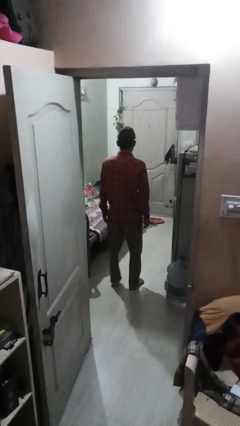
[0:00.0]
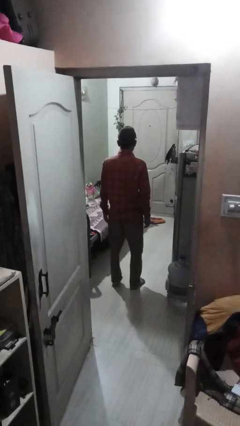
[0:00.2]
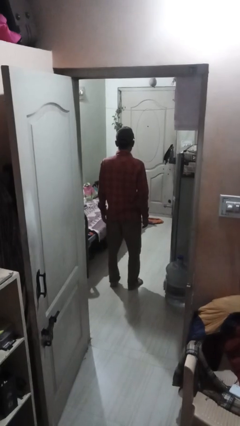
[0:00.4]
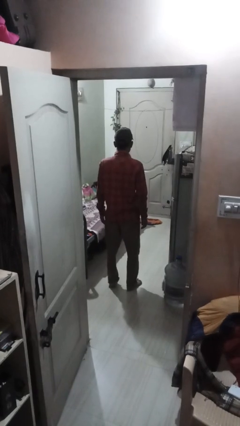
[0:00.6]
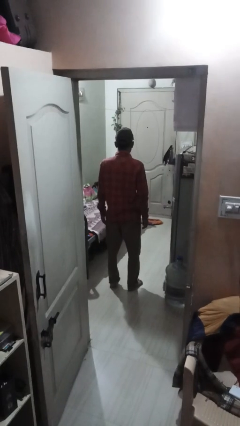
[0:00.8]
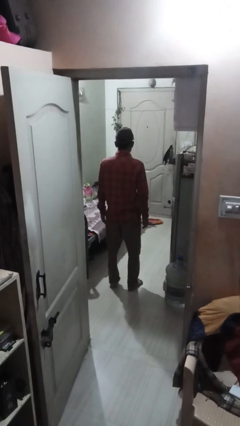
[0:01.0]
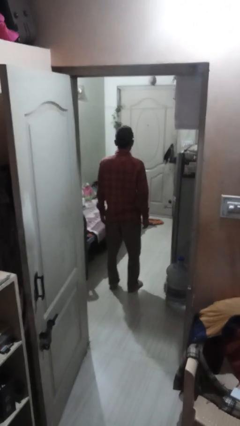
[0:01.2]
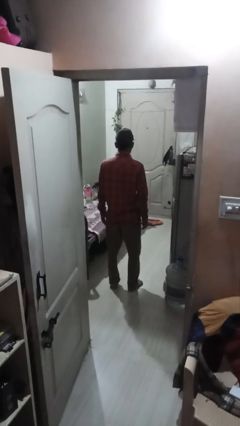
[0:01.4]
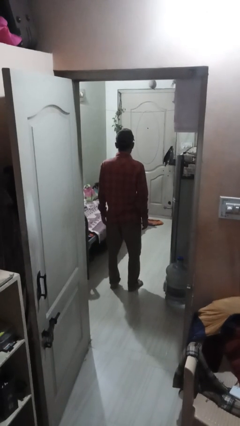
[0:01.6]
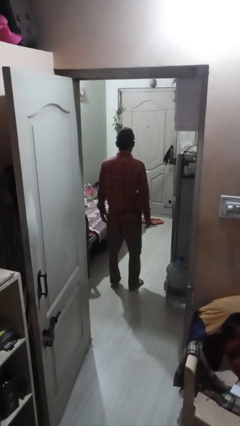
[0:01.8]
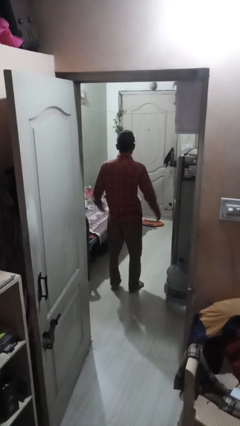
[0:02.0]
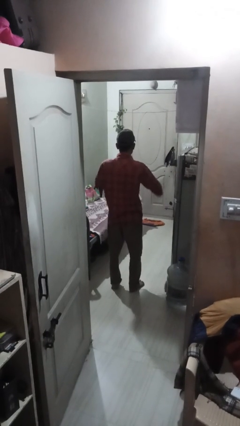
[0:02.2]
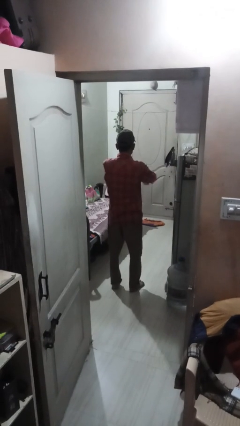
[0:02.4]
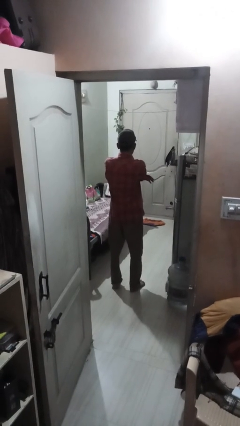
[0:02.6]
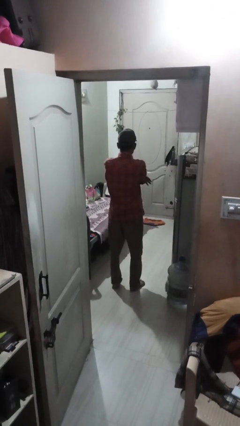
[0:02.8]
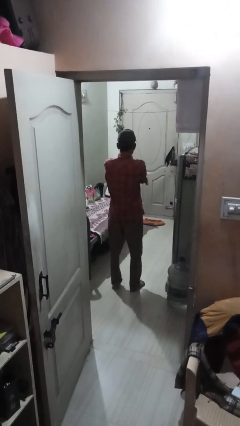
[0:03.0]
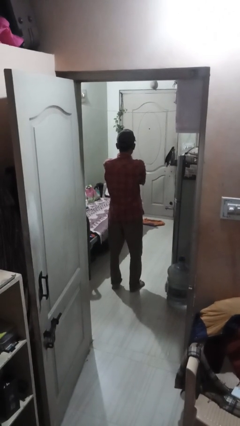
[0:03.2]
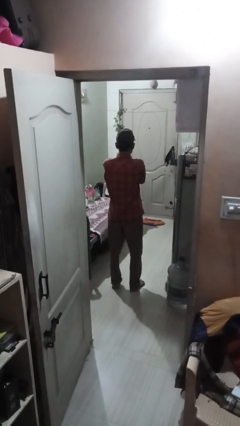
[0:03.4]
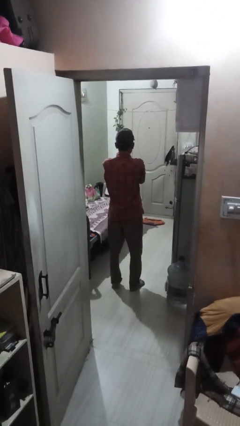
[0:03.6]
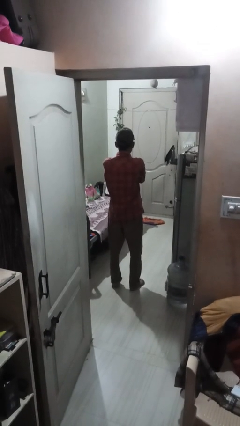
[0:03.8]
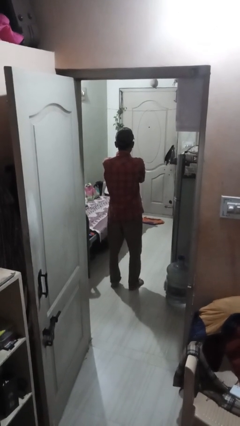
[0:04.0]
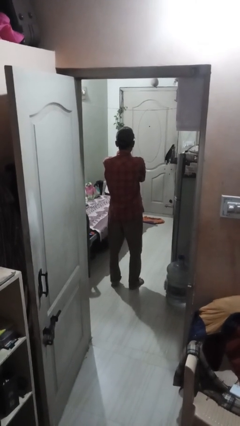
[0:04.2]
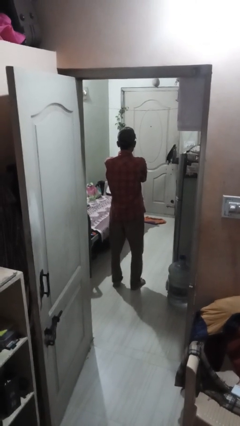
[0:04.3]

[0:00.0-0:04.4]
person crosses arms

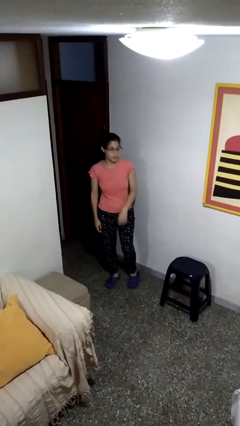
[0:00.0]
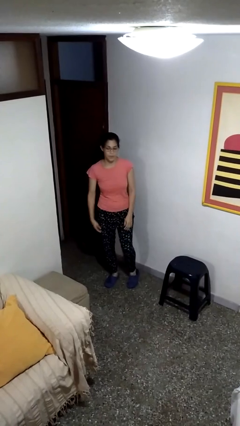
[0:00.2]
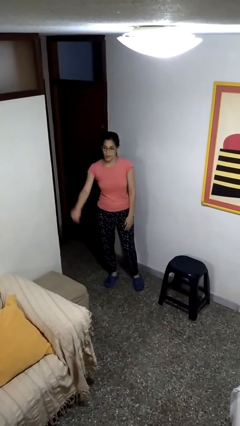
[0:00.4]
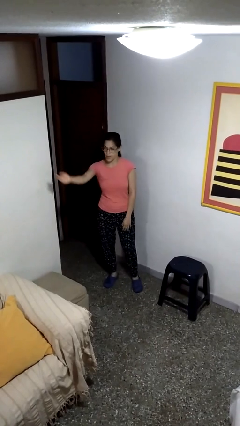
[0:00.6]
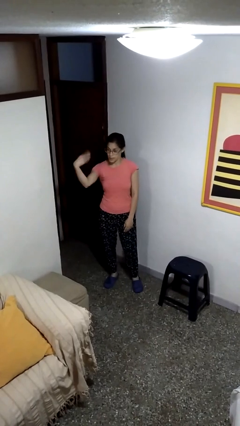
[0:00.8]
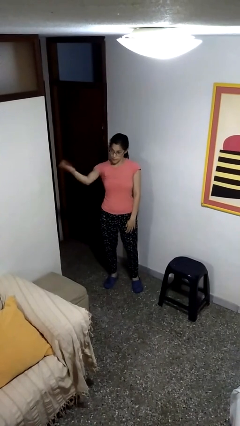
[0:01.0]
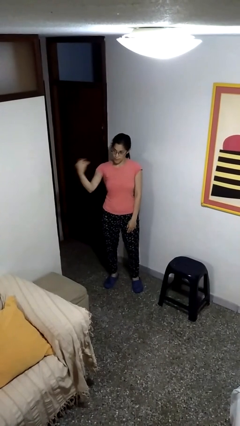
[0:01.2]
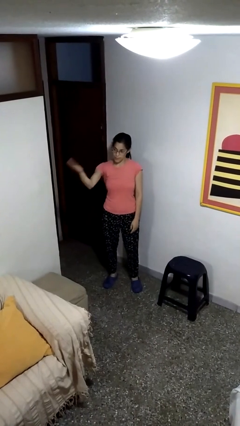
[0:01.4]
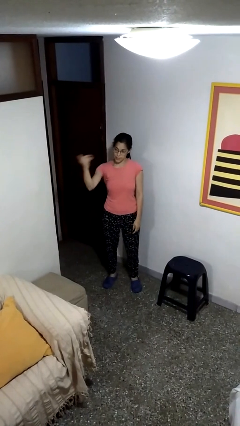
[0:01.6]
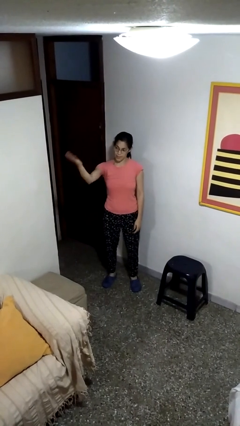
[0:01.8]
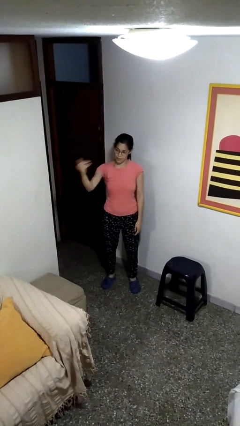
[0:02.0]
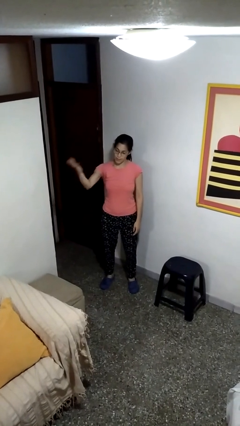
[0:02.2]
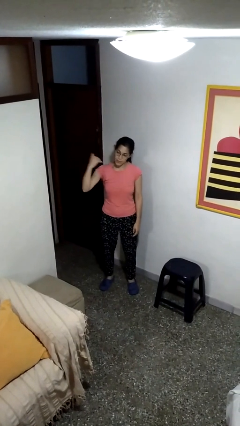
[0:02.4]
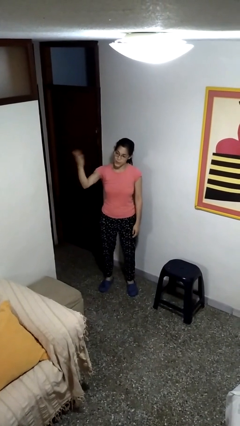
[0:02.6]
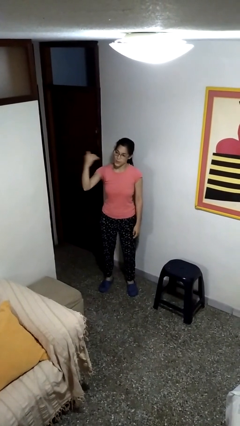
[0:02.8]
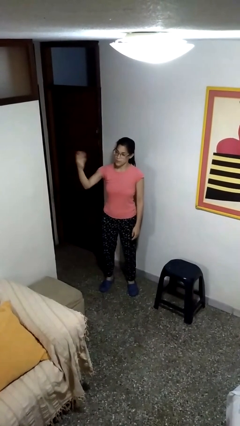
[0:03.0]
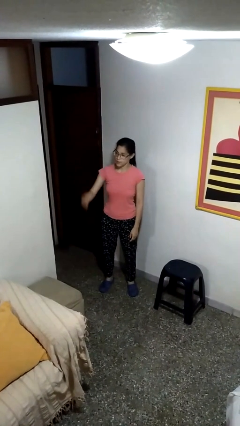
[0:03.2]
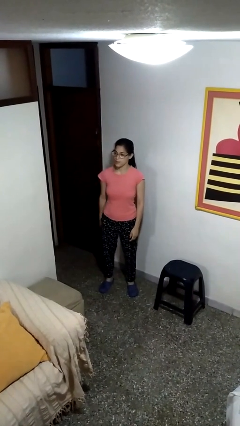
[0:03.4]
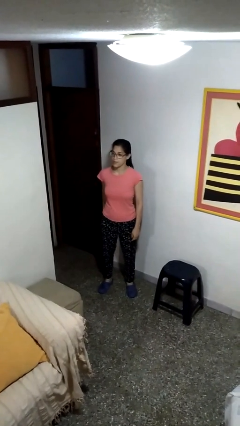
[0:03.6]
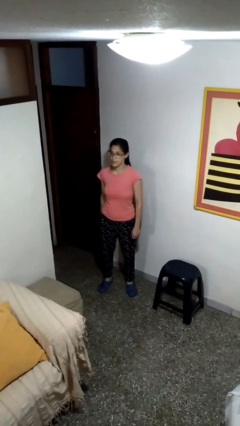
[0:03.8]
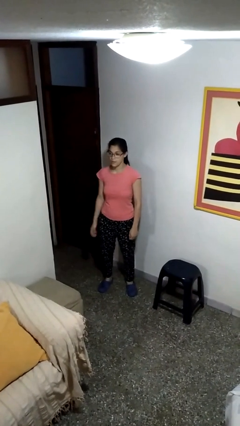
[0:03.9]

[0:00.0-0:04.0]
person gestures come here

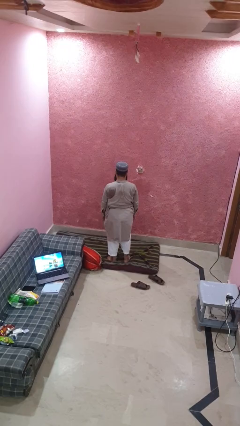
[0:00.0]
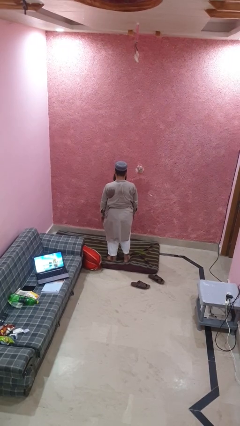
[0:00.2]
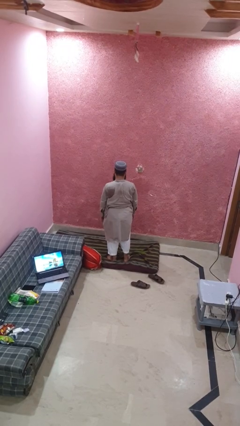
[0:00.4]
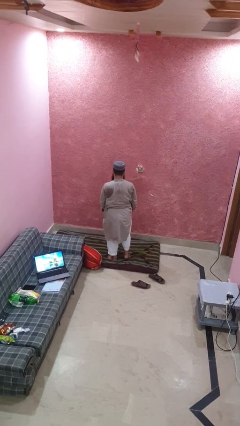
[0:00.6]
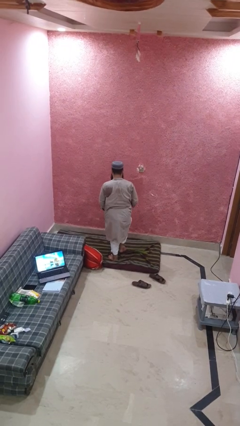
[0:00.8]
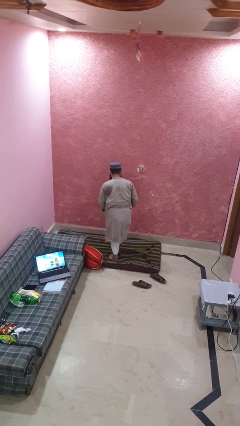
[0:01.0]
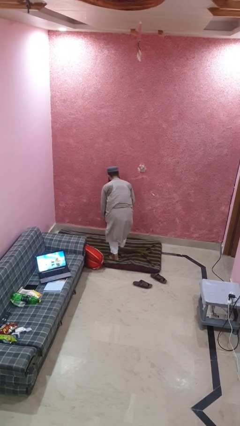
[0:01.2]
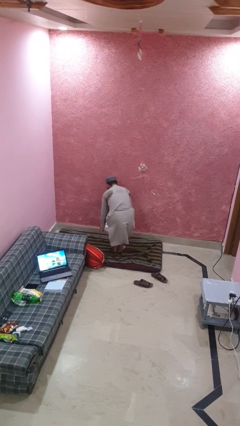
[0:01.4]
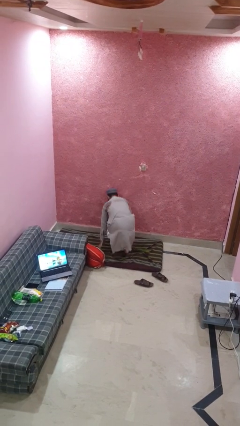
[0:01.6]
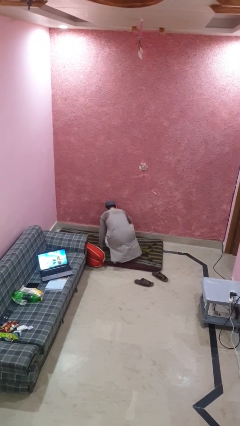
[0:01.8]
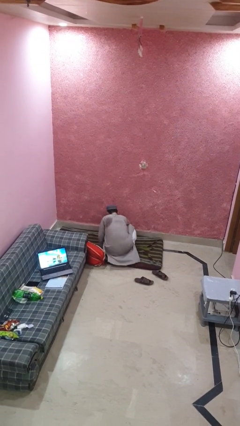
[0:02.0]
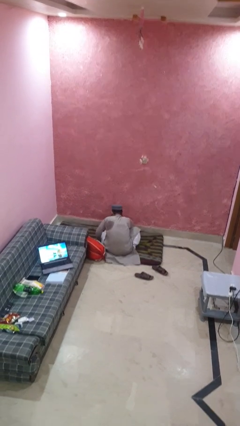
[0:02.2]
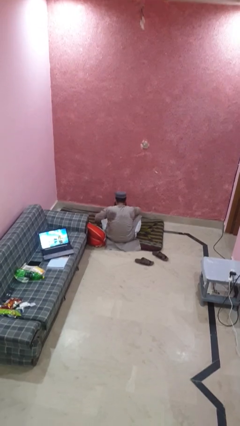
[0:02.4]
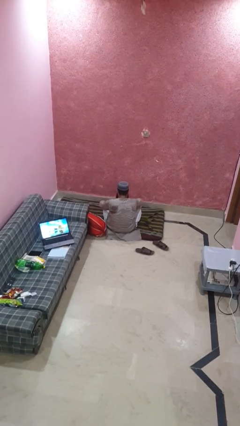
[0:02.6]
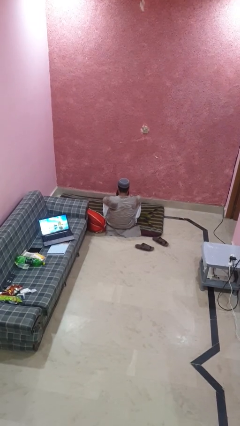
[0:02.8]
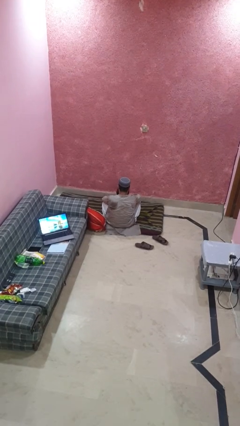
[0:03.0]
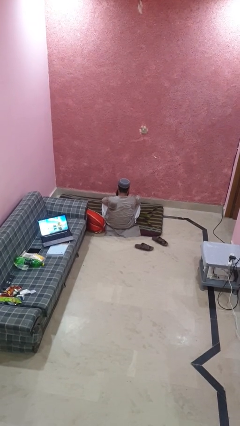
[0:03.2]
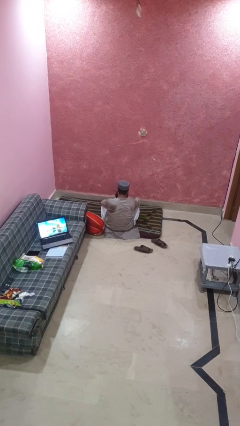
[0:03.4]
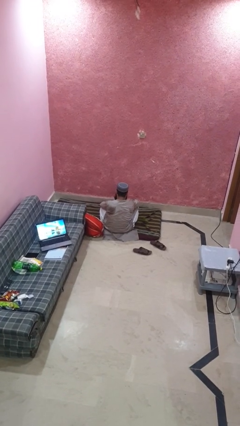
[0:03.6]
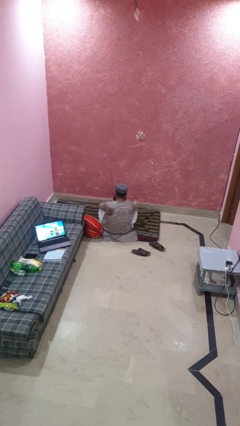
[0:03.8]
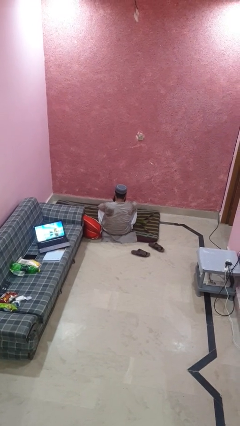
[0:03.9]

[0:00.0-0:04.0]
person sits crisscross

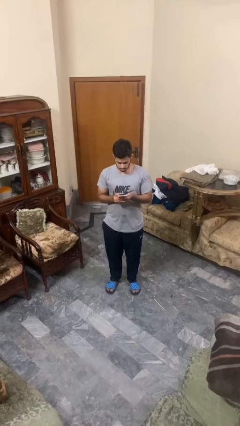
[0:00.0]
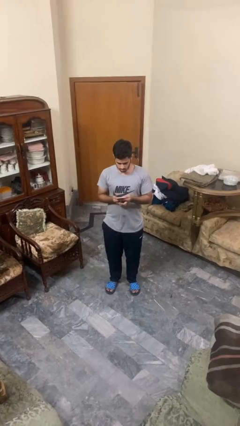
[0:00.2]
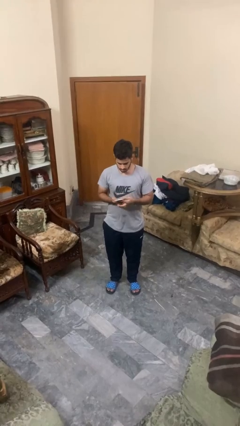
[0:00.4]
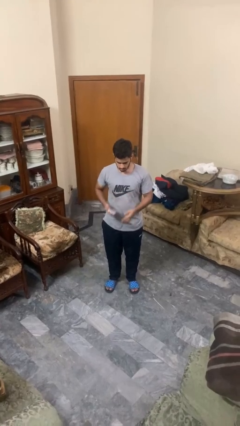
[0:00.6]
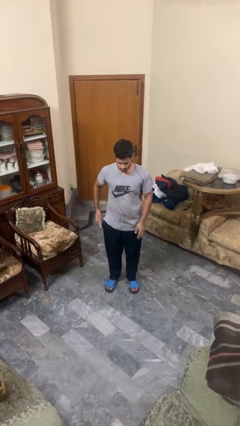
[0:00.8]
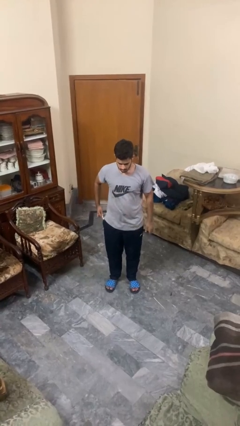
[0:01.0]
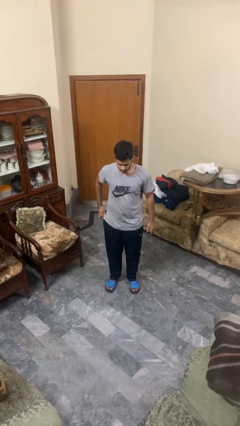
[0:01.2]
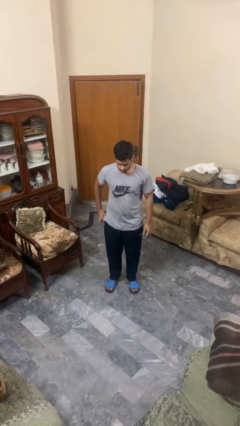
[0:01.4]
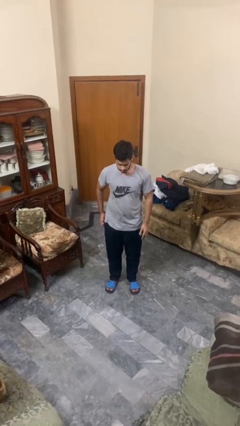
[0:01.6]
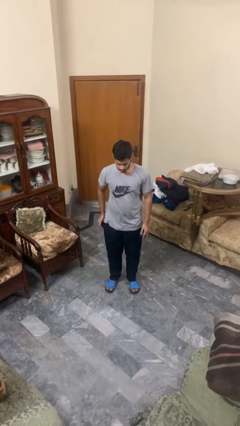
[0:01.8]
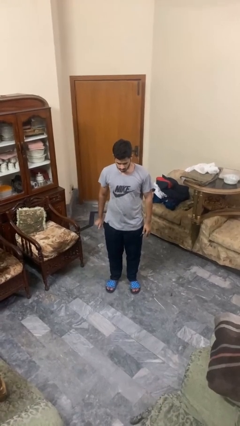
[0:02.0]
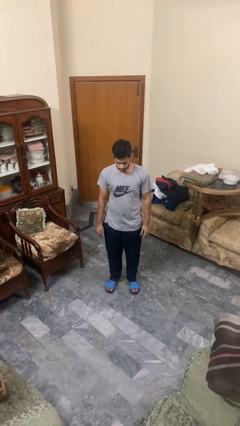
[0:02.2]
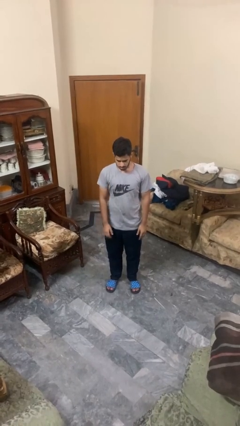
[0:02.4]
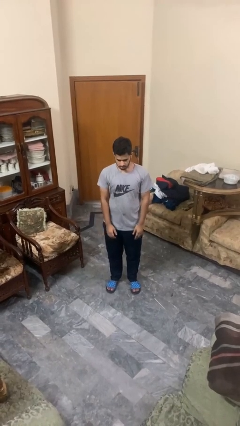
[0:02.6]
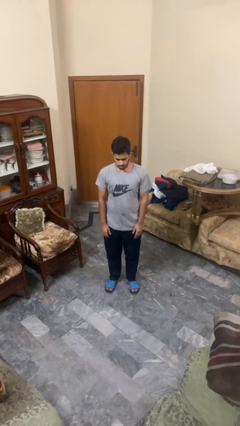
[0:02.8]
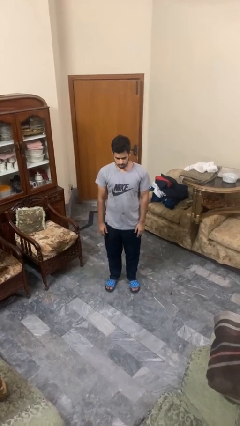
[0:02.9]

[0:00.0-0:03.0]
person puts phone into pocket

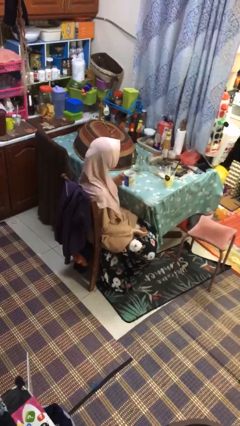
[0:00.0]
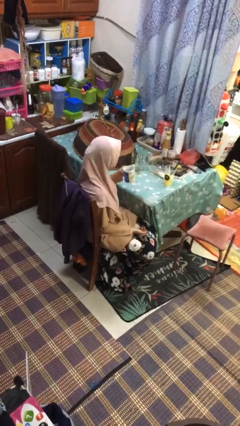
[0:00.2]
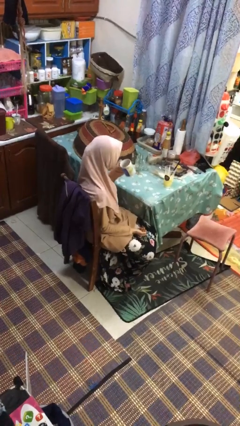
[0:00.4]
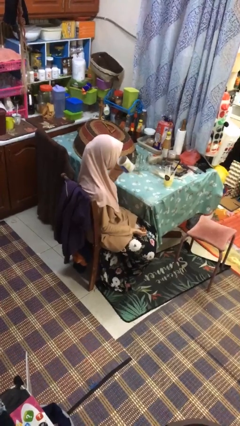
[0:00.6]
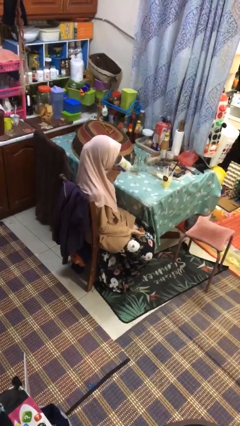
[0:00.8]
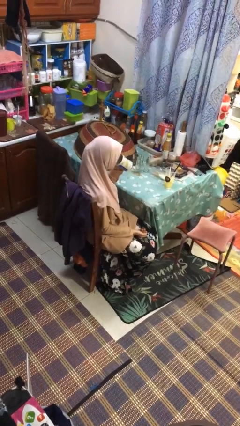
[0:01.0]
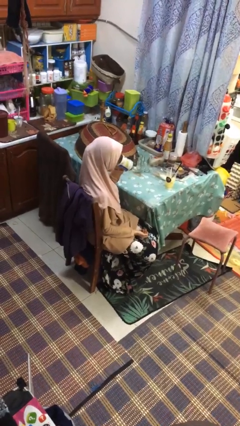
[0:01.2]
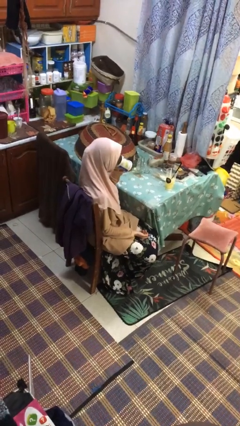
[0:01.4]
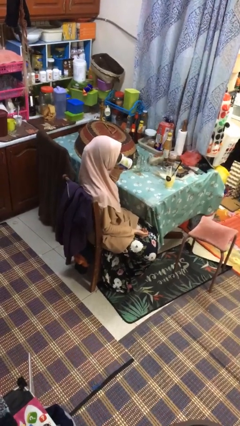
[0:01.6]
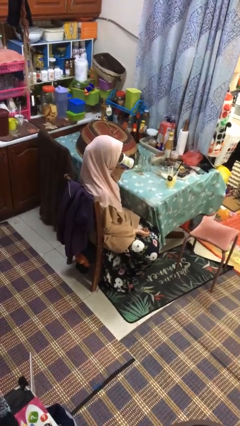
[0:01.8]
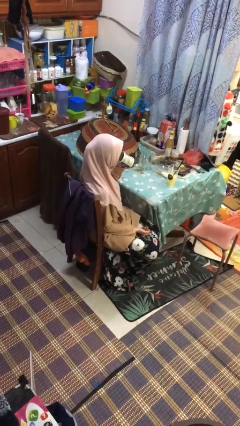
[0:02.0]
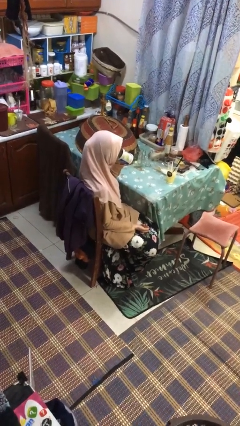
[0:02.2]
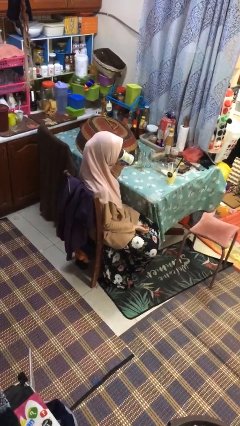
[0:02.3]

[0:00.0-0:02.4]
person drinks from mug
